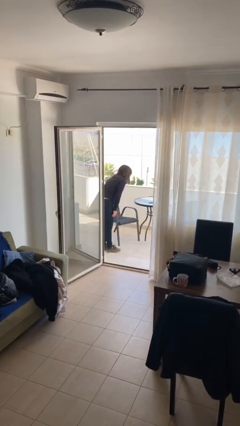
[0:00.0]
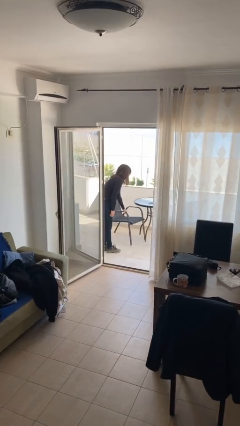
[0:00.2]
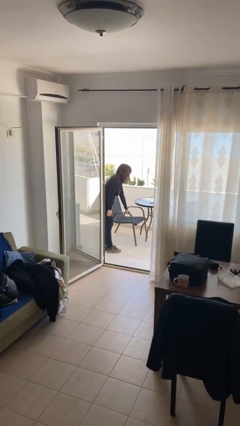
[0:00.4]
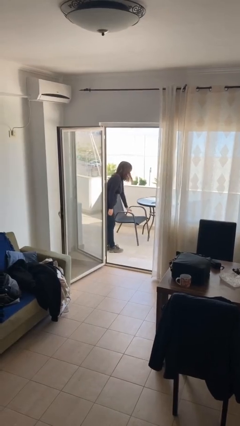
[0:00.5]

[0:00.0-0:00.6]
person stands up

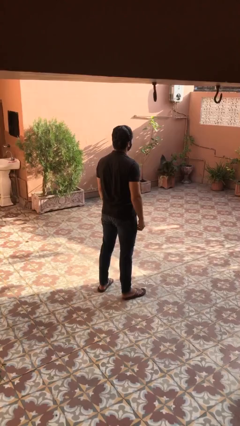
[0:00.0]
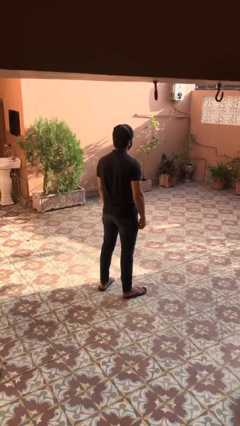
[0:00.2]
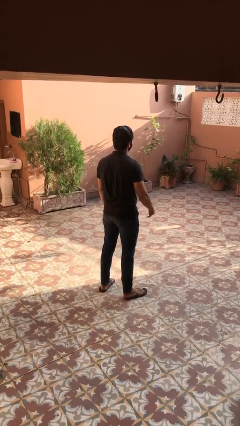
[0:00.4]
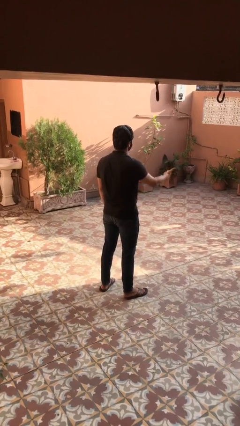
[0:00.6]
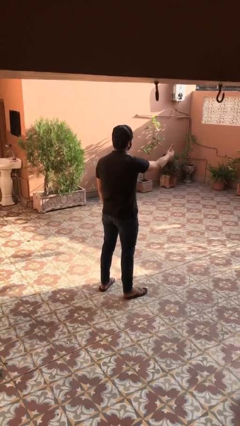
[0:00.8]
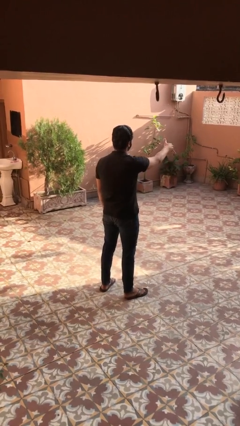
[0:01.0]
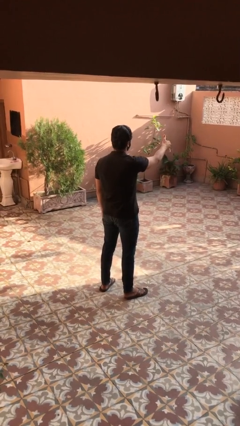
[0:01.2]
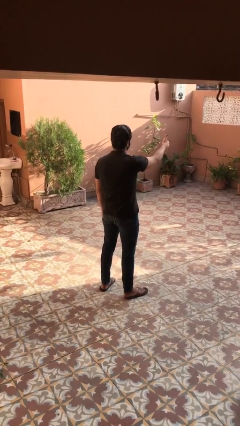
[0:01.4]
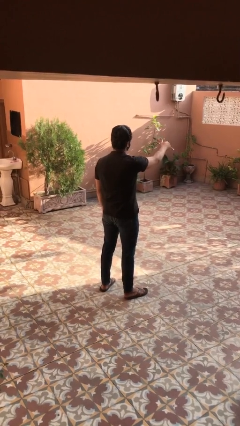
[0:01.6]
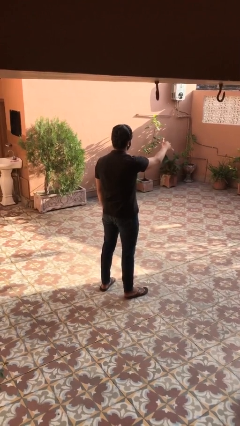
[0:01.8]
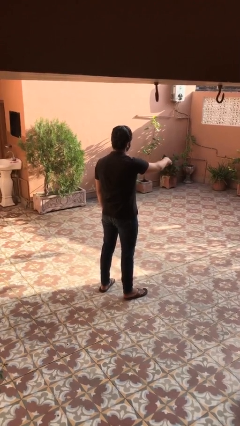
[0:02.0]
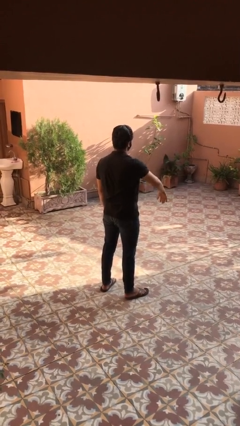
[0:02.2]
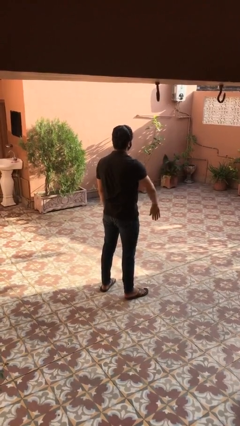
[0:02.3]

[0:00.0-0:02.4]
person gestures hang loose

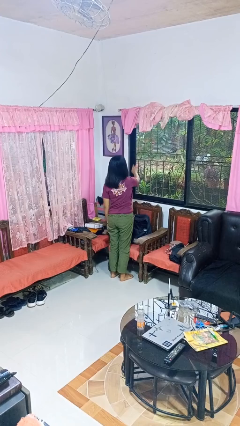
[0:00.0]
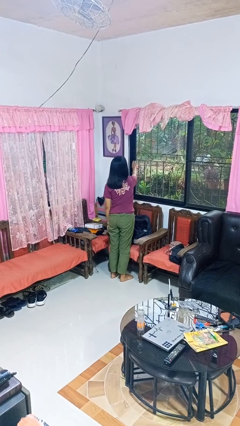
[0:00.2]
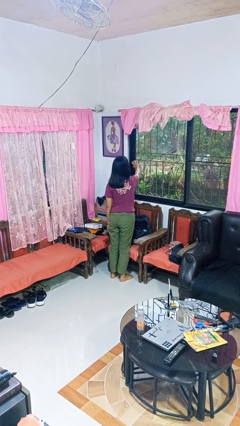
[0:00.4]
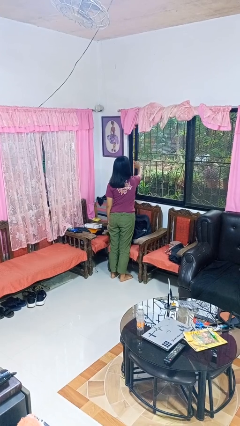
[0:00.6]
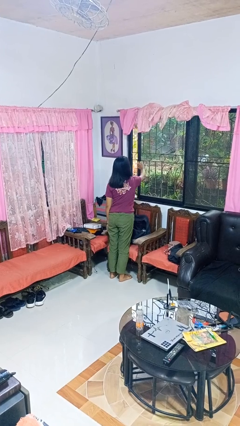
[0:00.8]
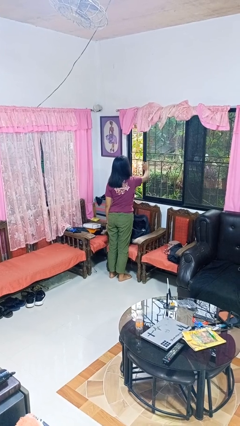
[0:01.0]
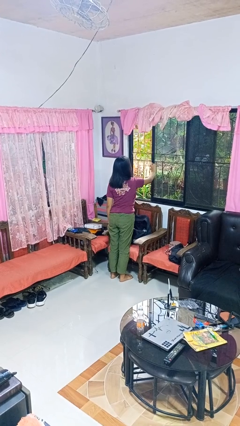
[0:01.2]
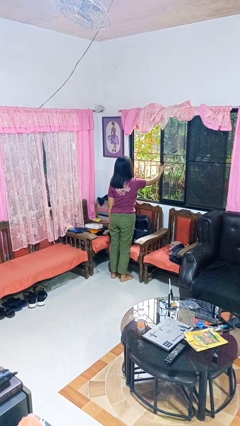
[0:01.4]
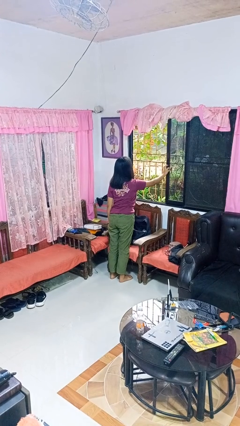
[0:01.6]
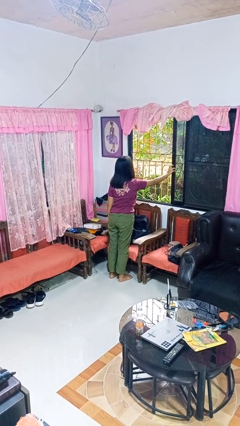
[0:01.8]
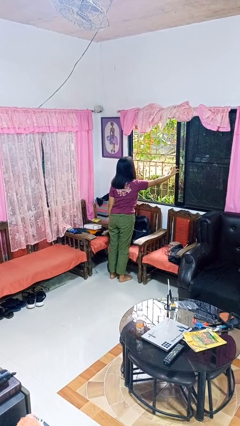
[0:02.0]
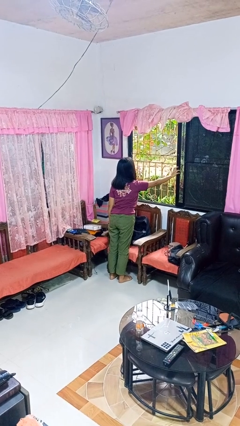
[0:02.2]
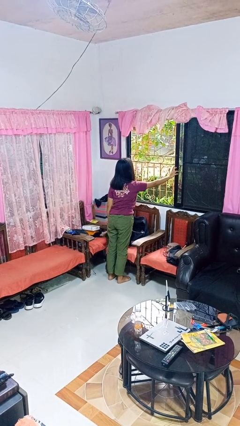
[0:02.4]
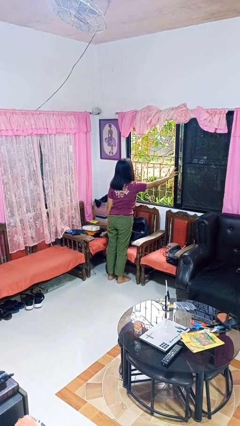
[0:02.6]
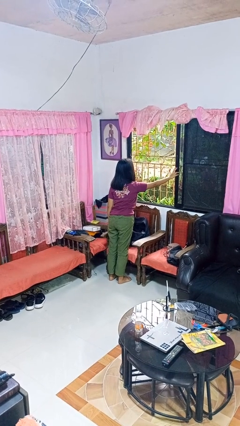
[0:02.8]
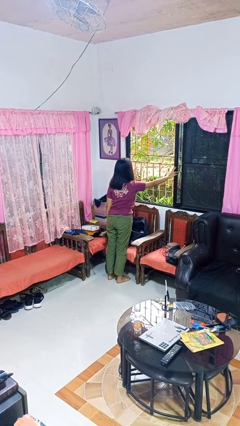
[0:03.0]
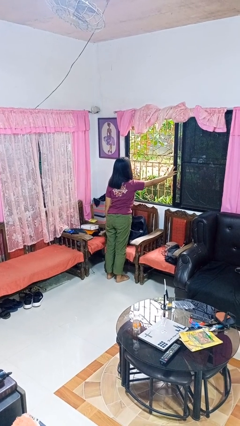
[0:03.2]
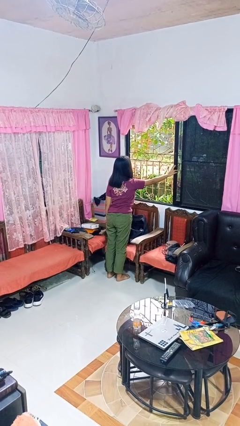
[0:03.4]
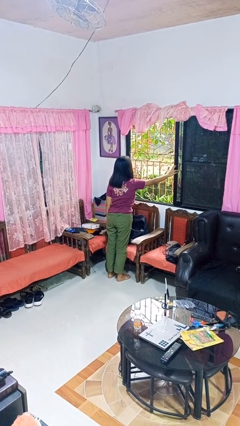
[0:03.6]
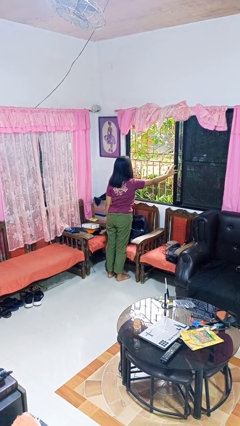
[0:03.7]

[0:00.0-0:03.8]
person opens home window

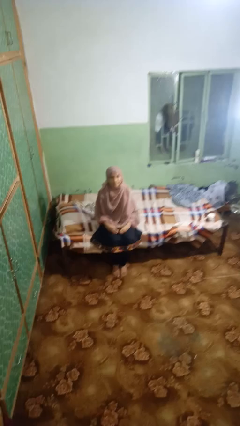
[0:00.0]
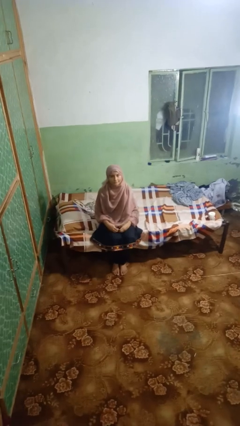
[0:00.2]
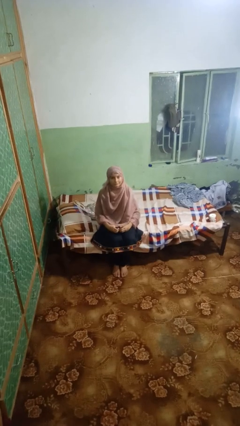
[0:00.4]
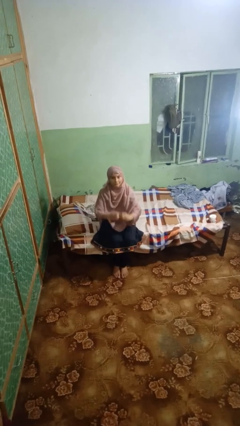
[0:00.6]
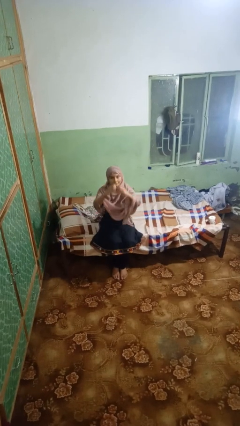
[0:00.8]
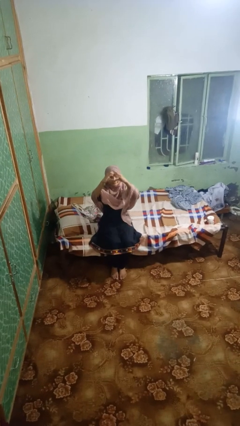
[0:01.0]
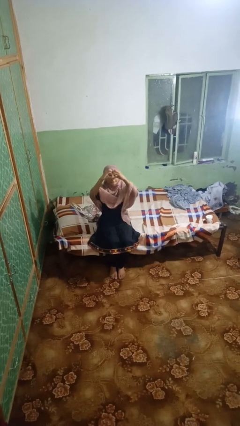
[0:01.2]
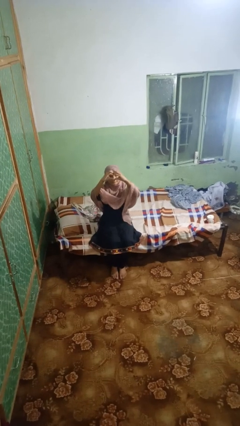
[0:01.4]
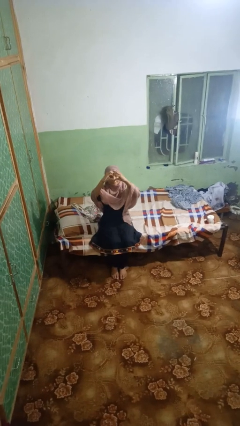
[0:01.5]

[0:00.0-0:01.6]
person gestures heart

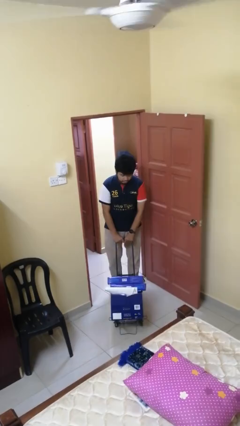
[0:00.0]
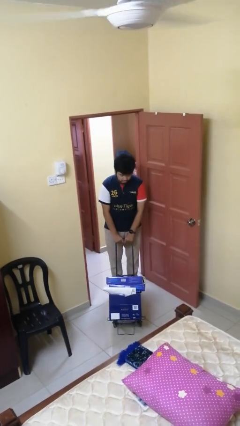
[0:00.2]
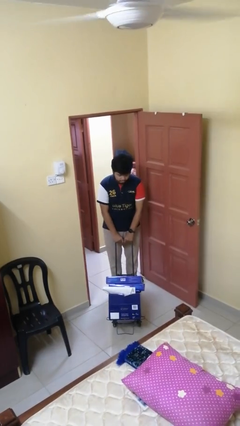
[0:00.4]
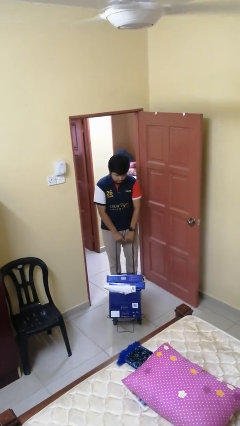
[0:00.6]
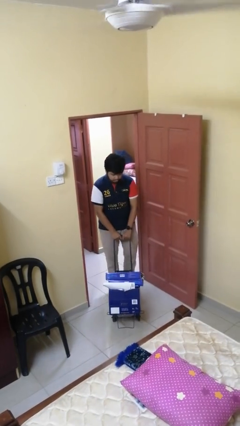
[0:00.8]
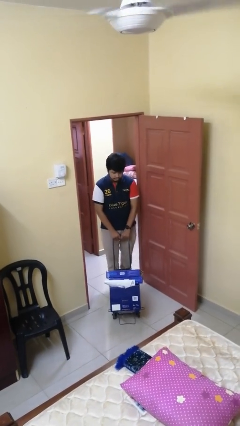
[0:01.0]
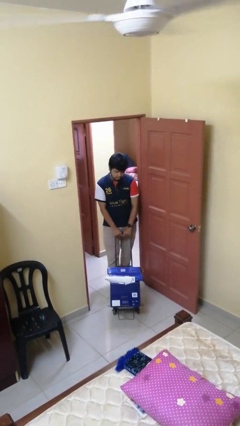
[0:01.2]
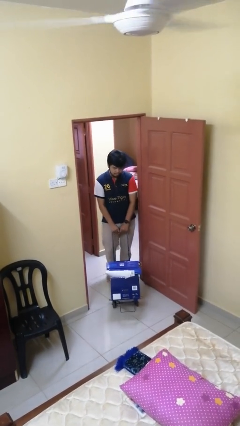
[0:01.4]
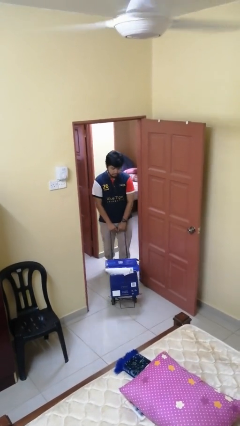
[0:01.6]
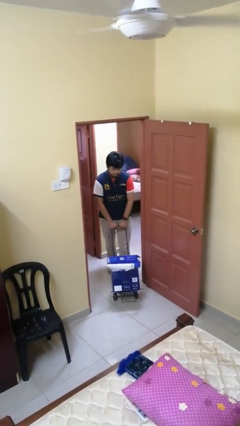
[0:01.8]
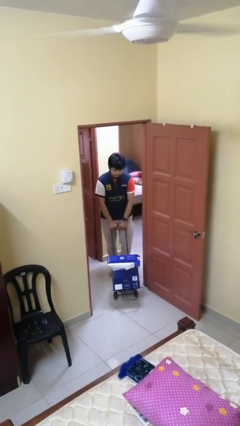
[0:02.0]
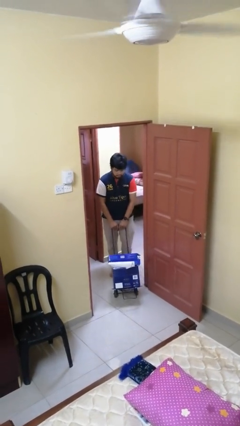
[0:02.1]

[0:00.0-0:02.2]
person pulls wheeled cart

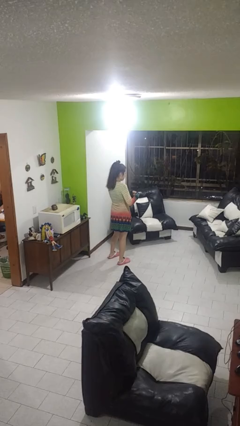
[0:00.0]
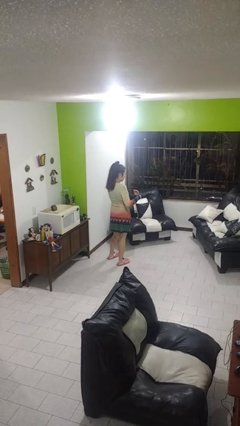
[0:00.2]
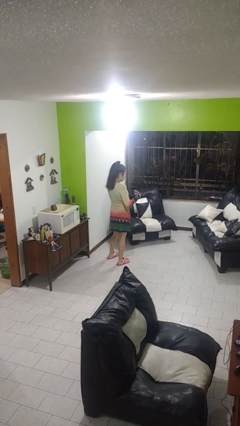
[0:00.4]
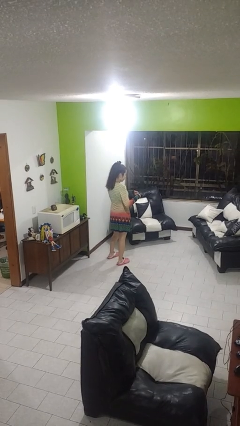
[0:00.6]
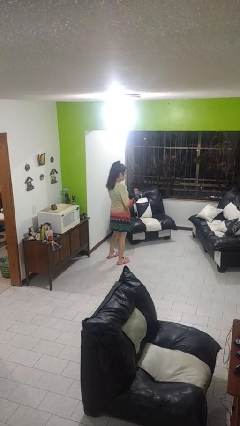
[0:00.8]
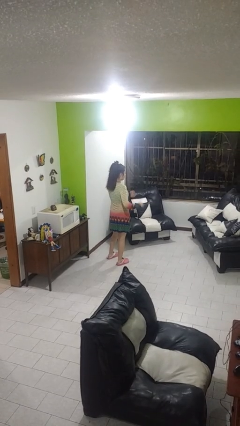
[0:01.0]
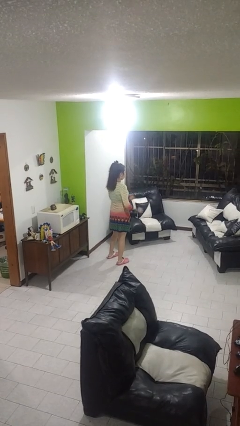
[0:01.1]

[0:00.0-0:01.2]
person clips fingernails

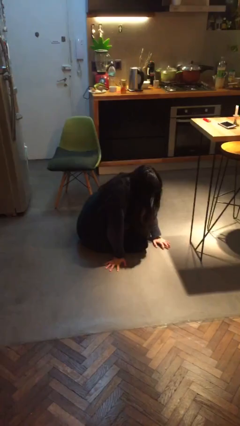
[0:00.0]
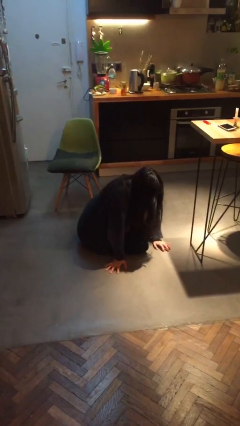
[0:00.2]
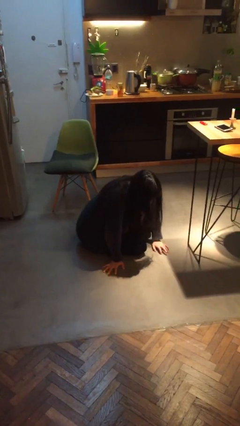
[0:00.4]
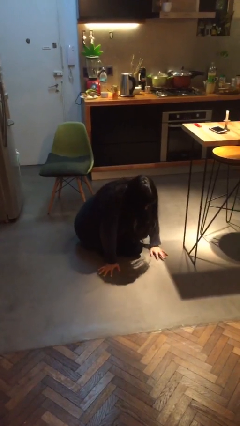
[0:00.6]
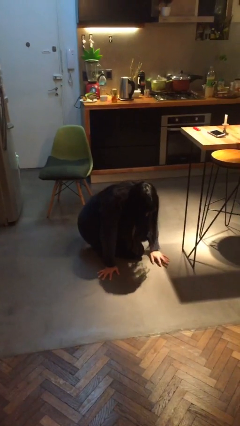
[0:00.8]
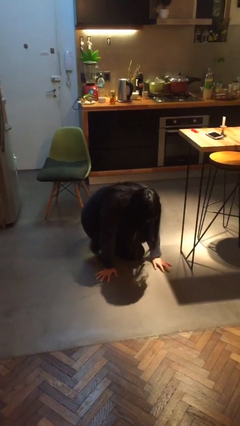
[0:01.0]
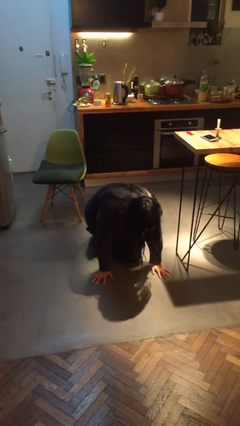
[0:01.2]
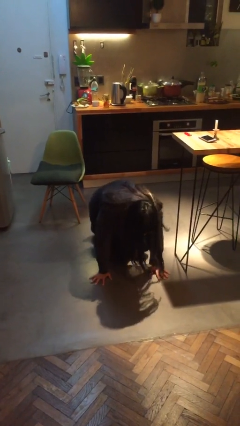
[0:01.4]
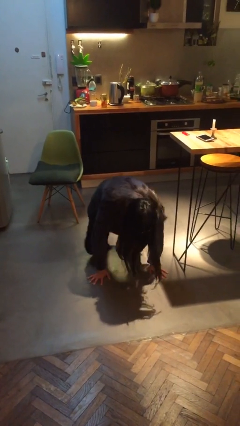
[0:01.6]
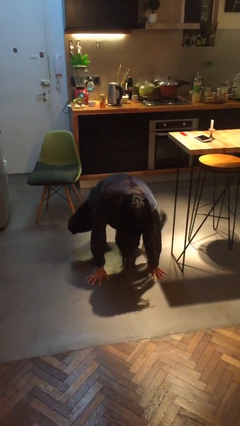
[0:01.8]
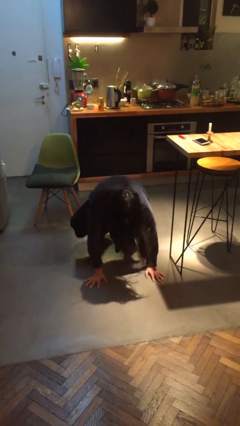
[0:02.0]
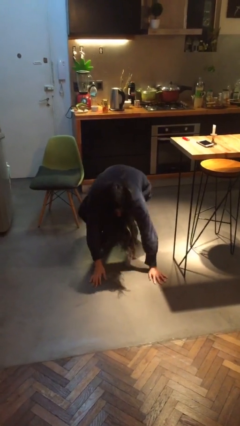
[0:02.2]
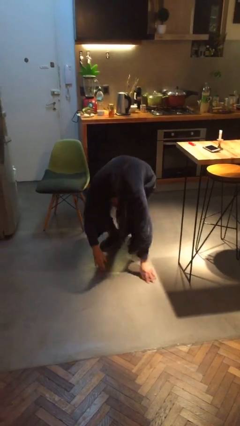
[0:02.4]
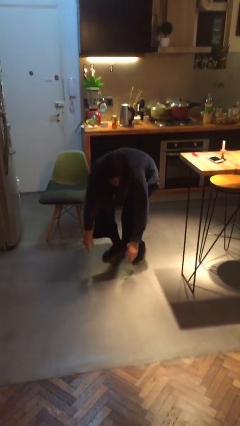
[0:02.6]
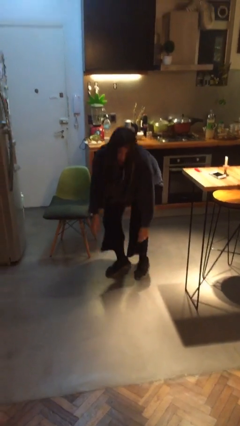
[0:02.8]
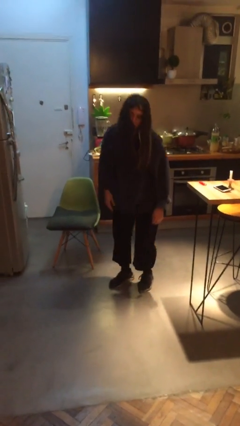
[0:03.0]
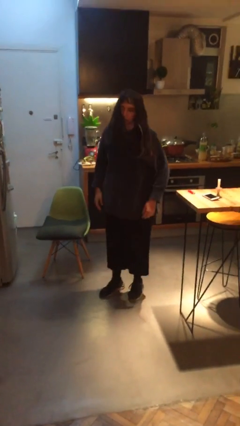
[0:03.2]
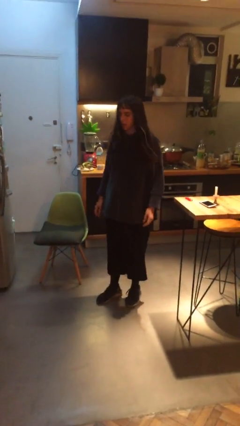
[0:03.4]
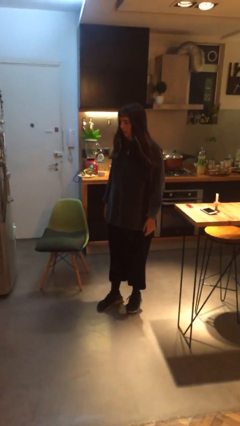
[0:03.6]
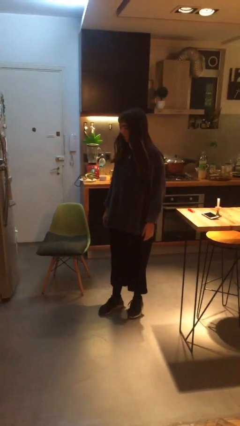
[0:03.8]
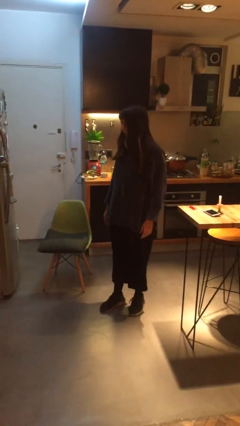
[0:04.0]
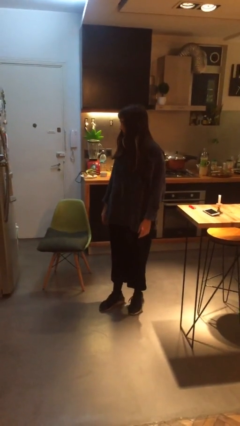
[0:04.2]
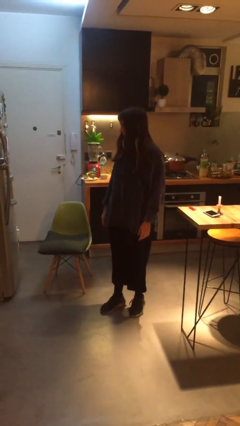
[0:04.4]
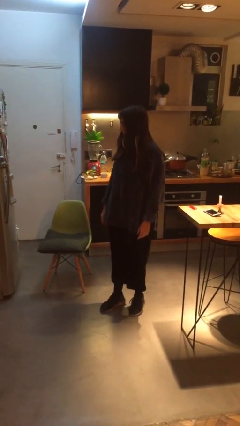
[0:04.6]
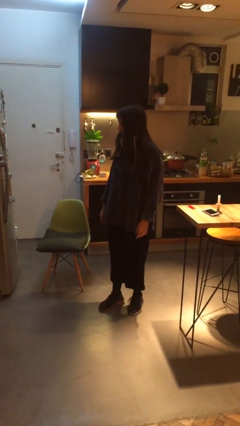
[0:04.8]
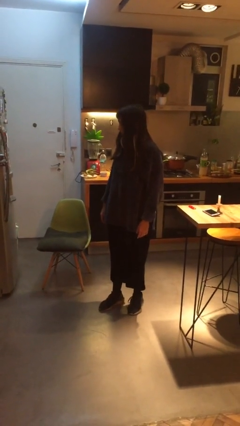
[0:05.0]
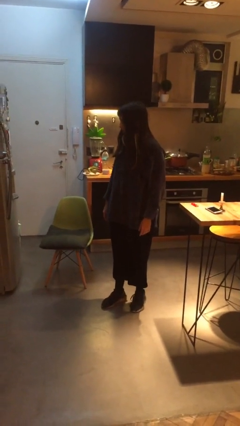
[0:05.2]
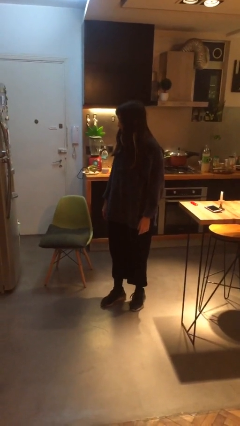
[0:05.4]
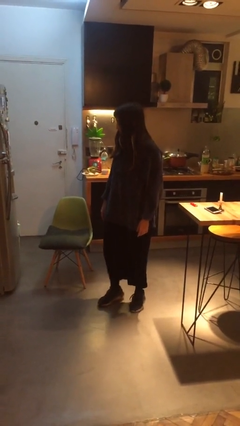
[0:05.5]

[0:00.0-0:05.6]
person stands up from floor
